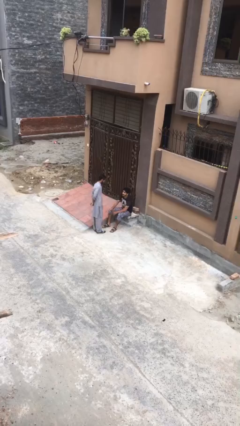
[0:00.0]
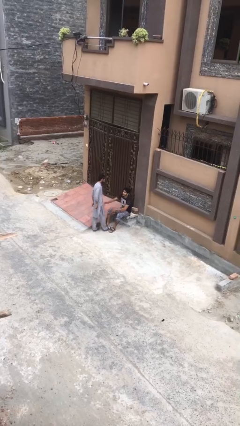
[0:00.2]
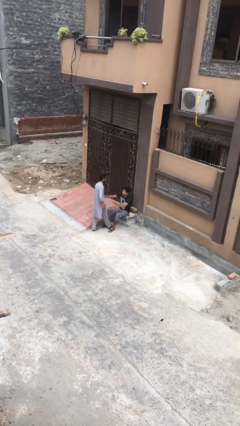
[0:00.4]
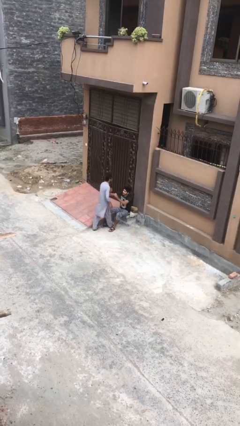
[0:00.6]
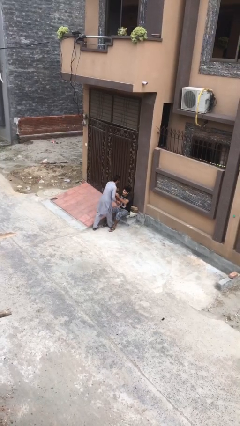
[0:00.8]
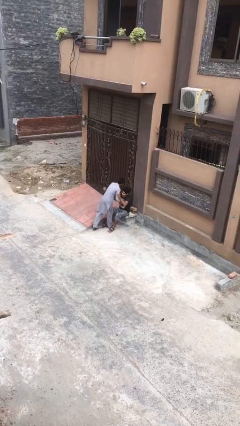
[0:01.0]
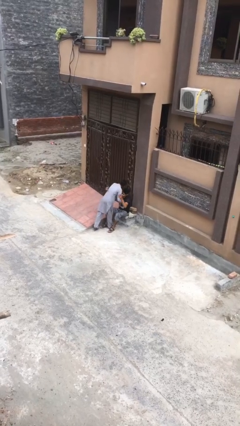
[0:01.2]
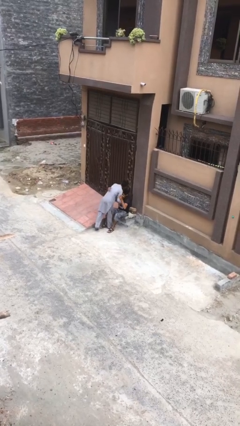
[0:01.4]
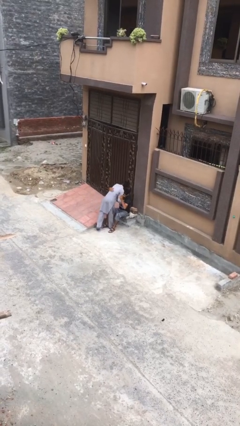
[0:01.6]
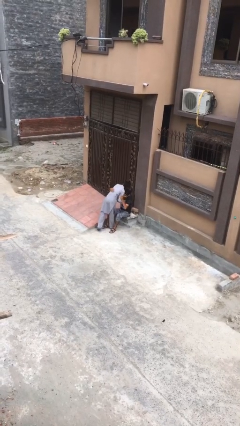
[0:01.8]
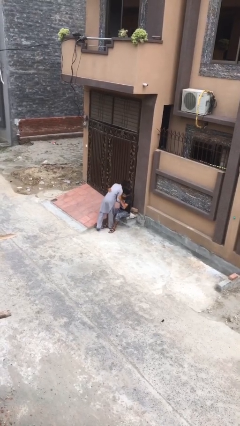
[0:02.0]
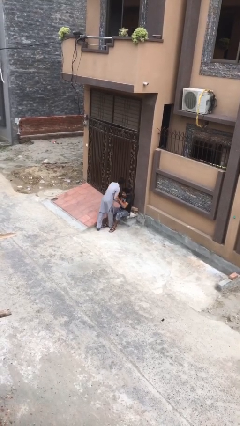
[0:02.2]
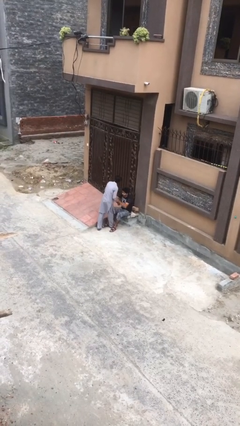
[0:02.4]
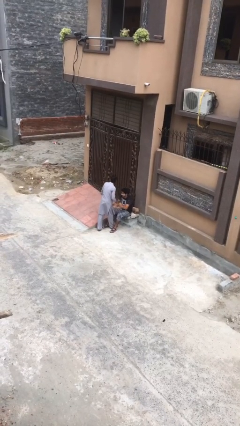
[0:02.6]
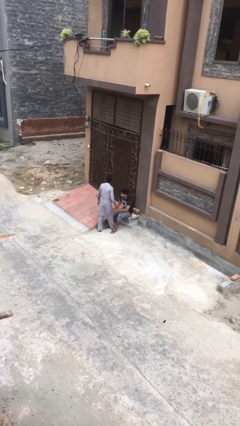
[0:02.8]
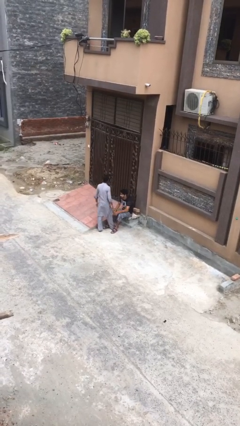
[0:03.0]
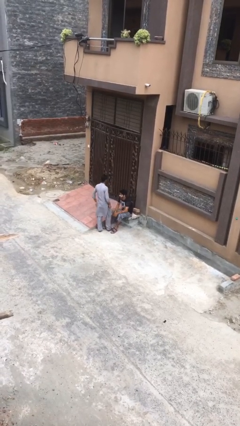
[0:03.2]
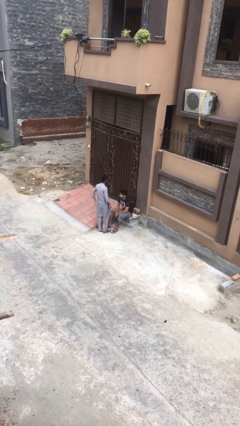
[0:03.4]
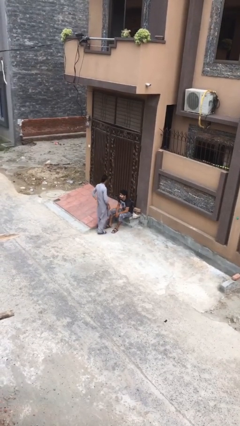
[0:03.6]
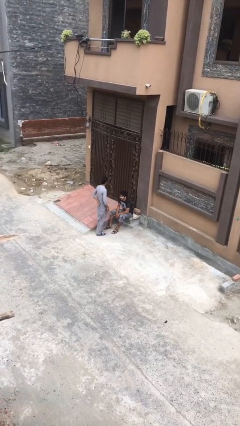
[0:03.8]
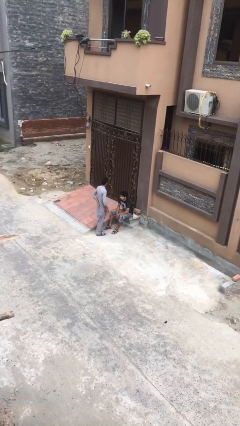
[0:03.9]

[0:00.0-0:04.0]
person embraces person

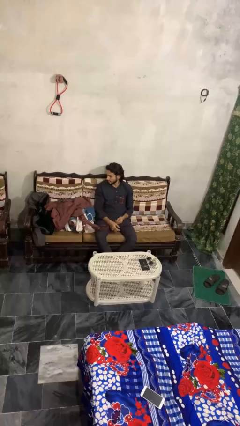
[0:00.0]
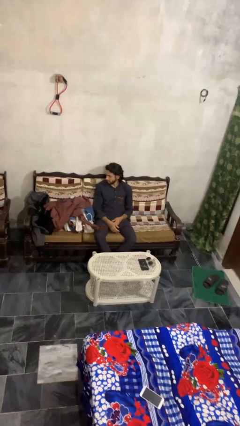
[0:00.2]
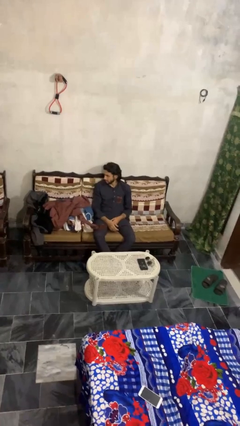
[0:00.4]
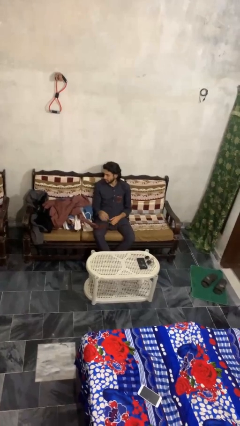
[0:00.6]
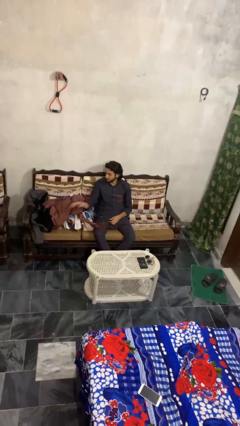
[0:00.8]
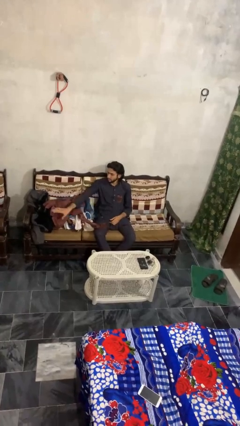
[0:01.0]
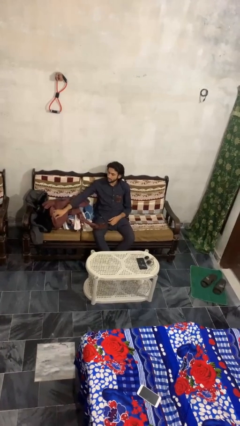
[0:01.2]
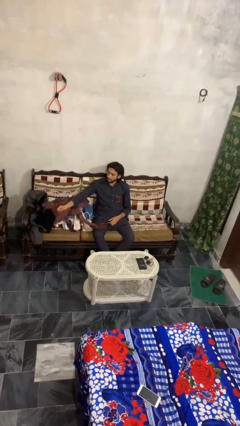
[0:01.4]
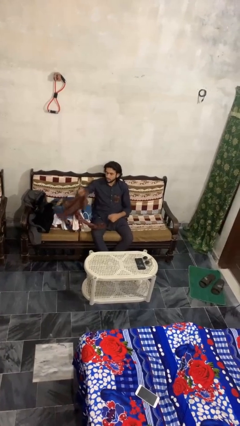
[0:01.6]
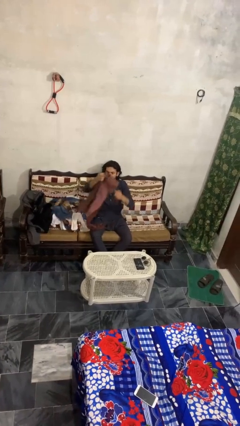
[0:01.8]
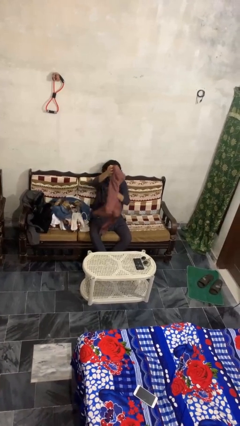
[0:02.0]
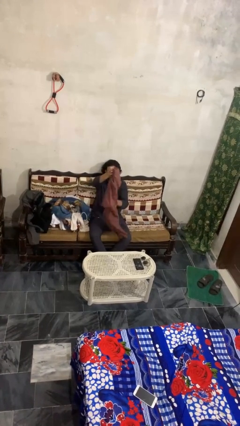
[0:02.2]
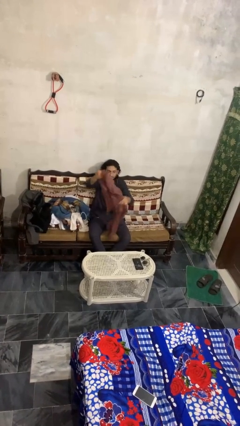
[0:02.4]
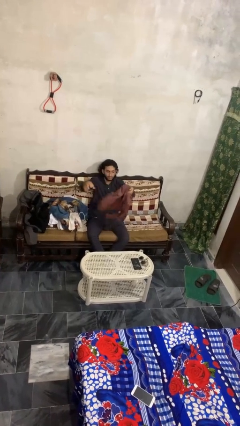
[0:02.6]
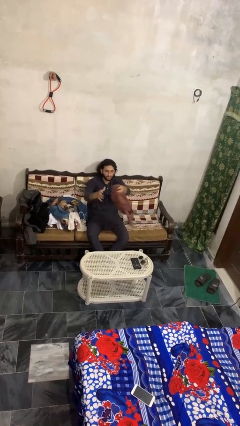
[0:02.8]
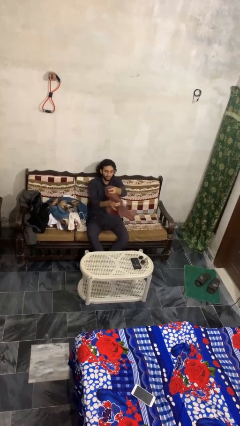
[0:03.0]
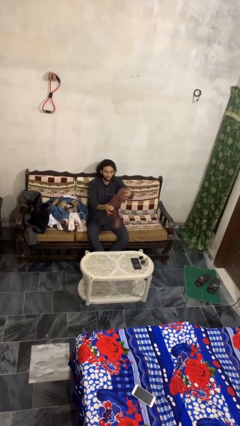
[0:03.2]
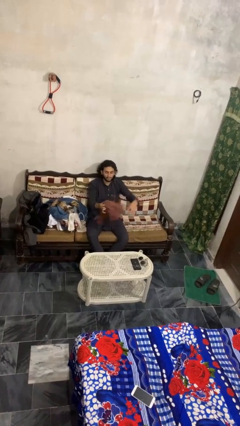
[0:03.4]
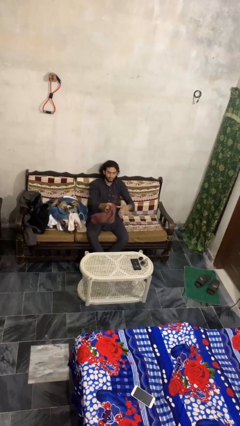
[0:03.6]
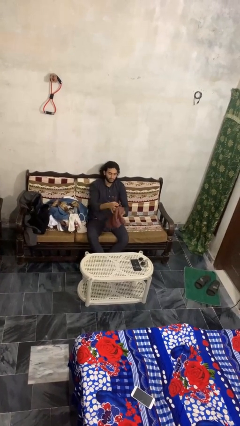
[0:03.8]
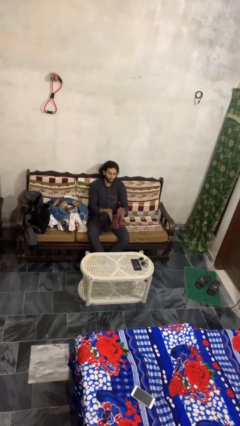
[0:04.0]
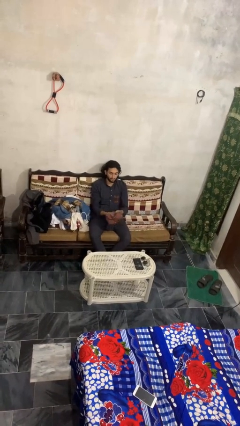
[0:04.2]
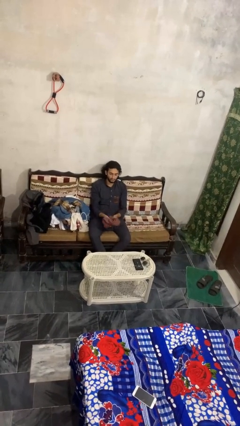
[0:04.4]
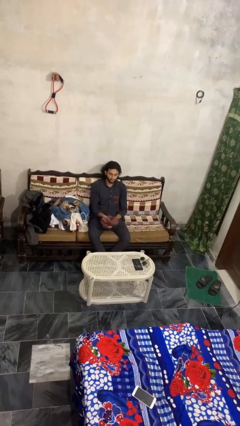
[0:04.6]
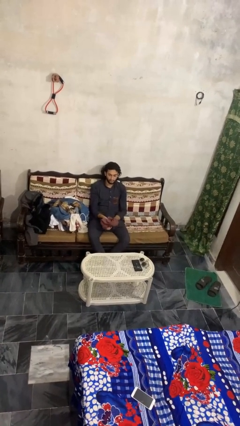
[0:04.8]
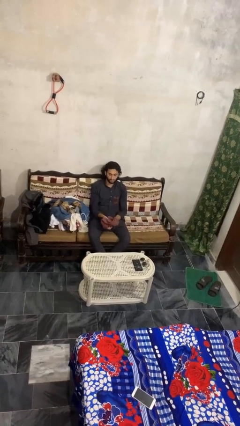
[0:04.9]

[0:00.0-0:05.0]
person folds shirt

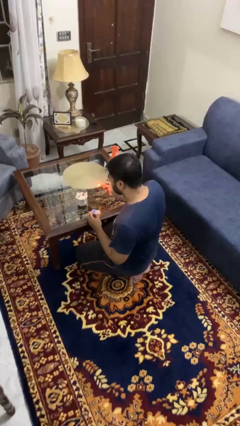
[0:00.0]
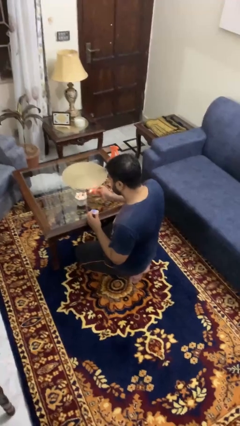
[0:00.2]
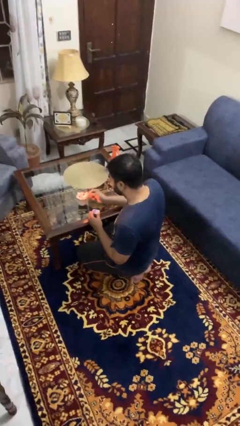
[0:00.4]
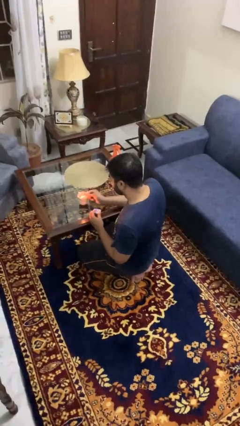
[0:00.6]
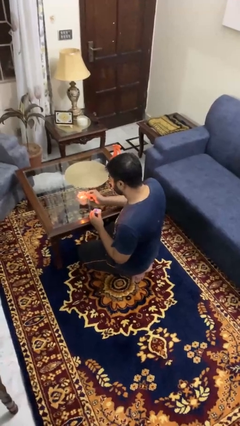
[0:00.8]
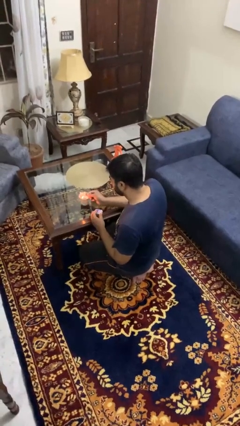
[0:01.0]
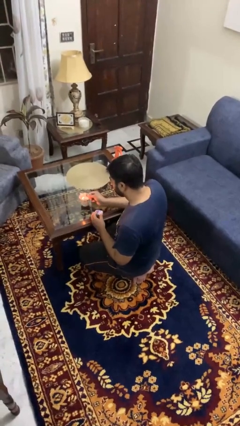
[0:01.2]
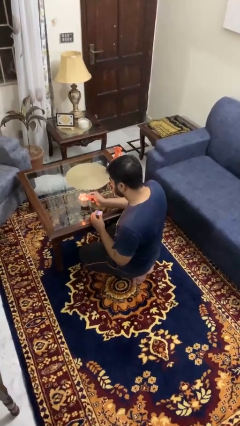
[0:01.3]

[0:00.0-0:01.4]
person lights candle

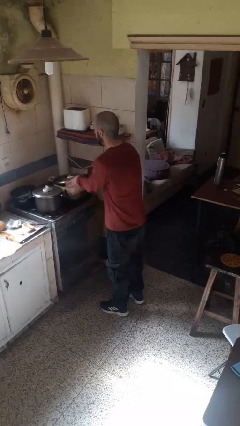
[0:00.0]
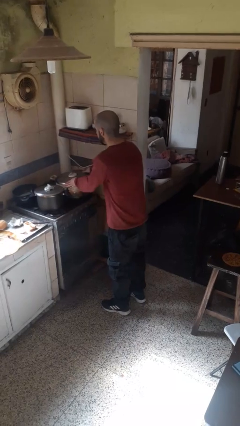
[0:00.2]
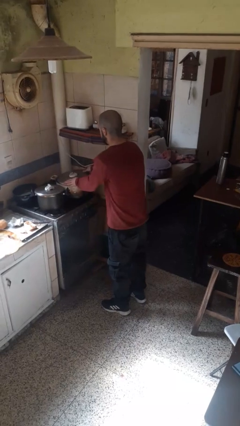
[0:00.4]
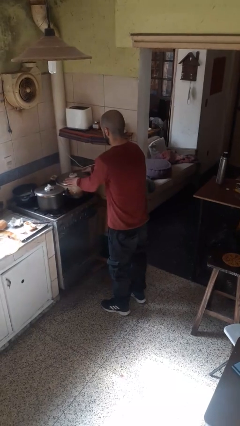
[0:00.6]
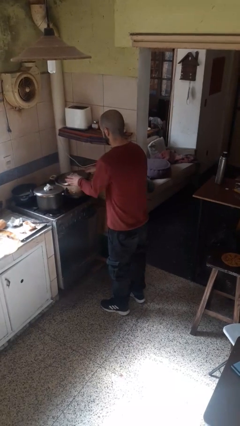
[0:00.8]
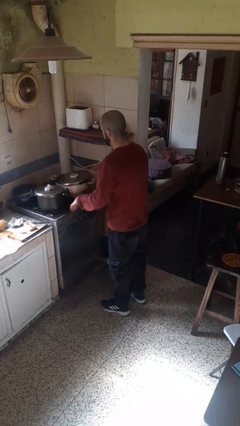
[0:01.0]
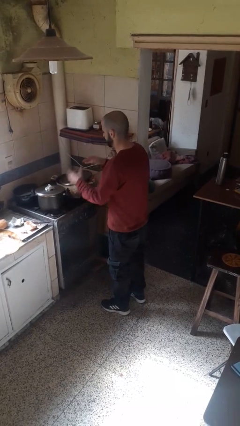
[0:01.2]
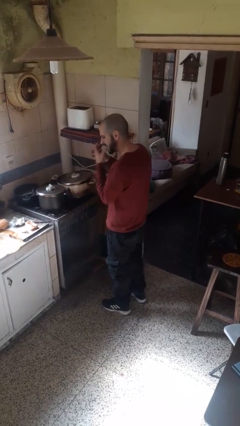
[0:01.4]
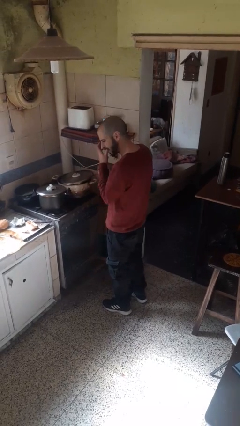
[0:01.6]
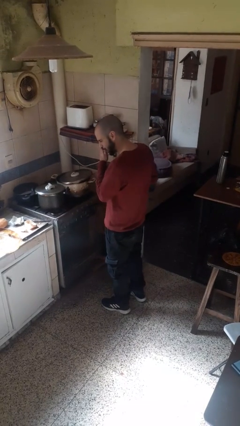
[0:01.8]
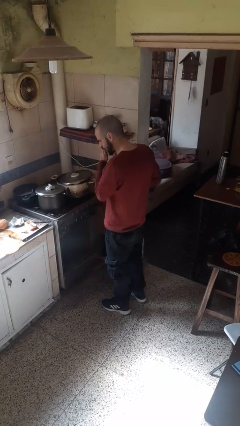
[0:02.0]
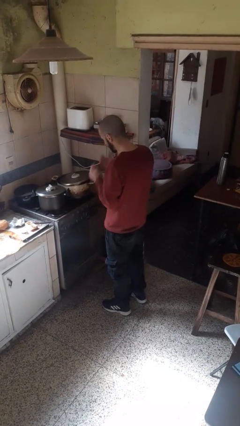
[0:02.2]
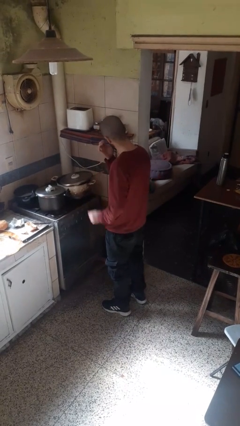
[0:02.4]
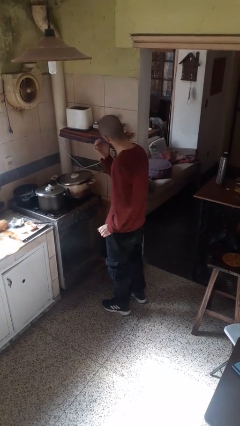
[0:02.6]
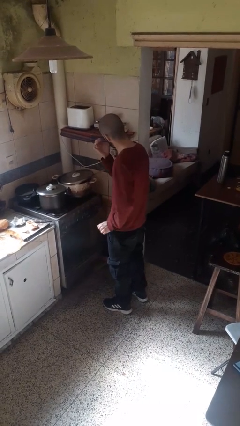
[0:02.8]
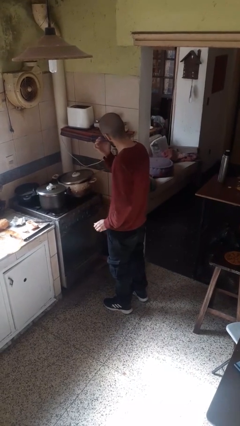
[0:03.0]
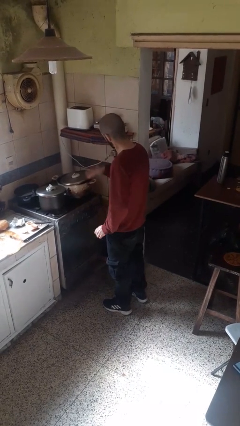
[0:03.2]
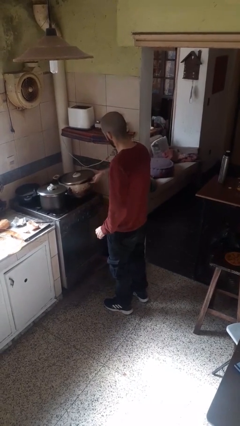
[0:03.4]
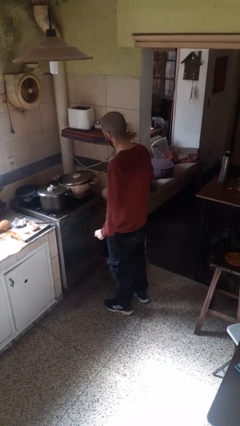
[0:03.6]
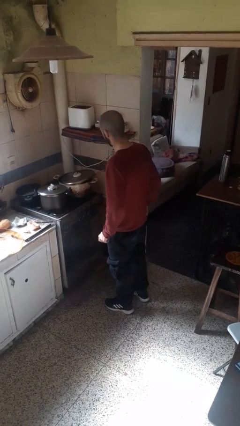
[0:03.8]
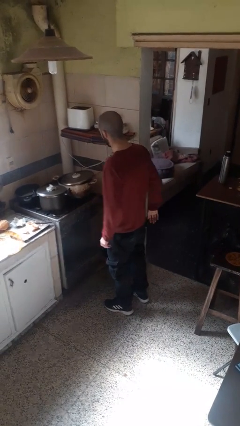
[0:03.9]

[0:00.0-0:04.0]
person burns hand

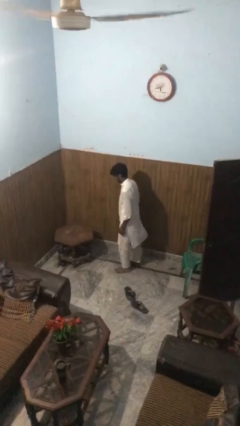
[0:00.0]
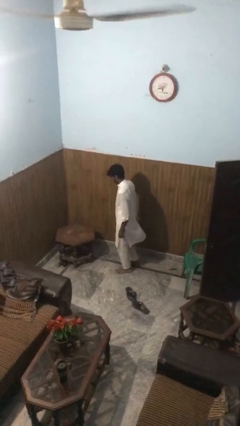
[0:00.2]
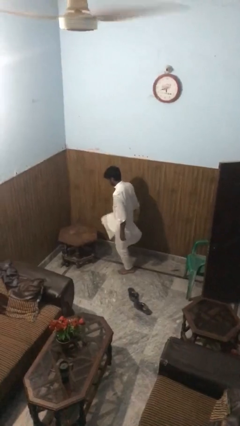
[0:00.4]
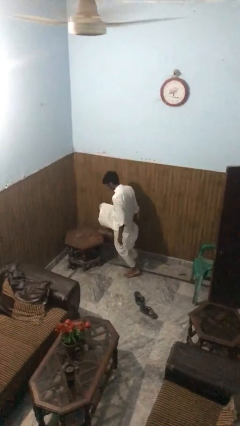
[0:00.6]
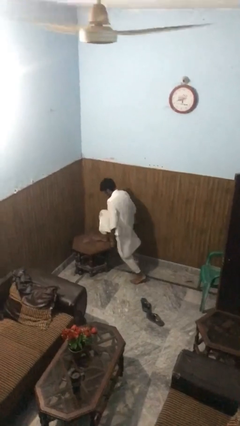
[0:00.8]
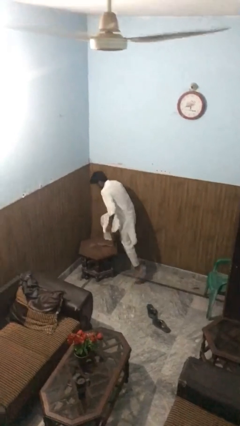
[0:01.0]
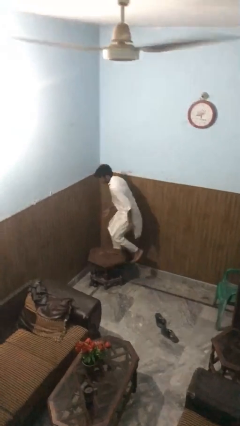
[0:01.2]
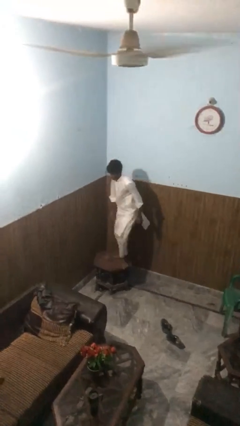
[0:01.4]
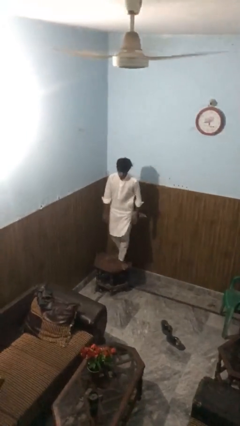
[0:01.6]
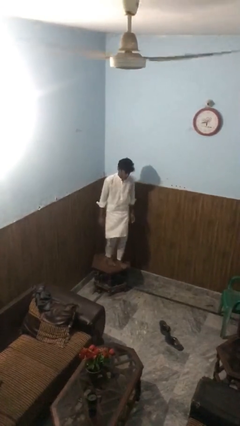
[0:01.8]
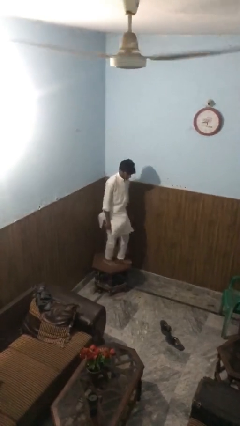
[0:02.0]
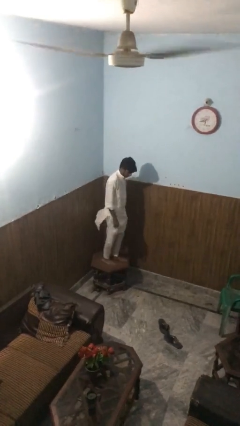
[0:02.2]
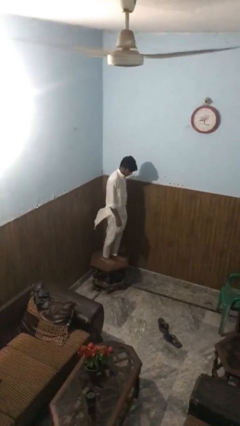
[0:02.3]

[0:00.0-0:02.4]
person climbs on table

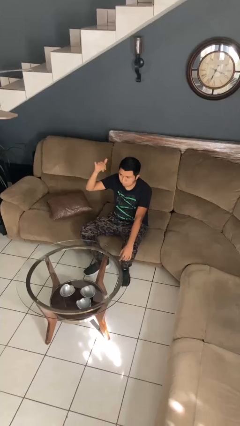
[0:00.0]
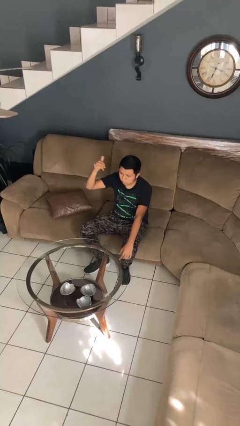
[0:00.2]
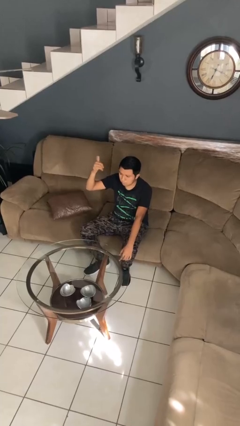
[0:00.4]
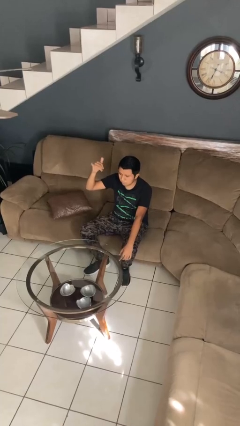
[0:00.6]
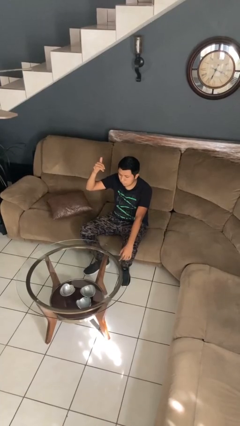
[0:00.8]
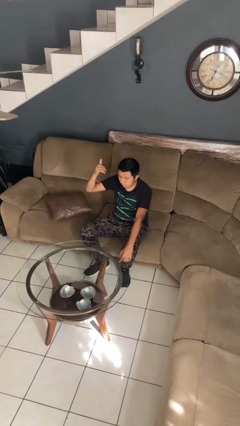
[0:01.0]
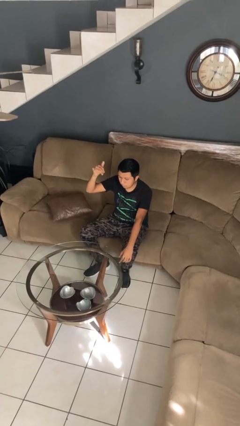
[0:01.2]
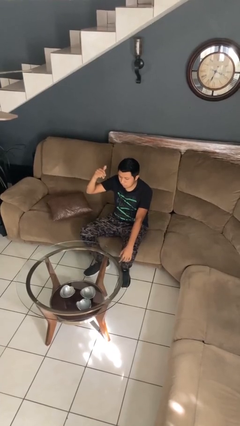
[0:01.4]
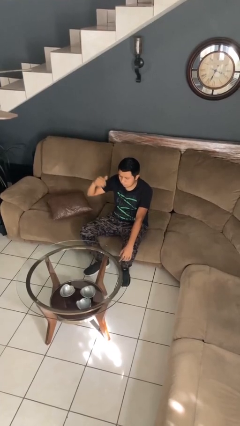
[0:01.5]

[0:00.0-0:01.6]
person gestures hang loose
